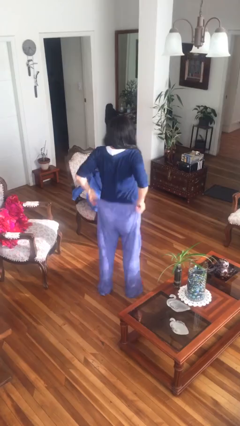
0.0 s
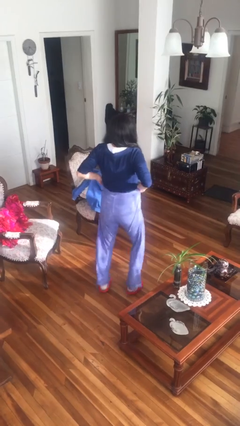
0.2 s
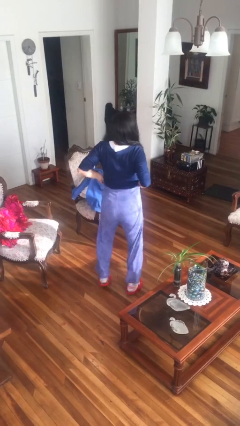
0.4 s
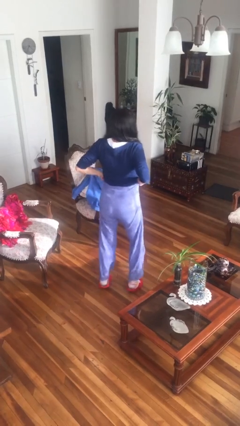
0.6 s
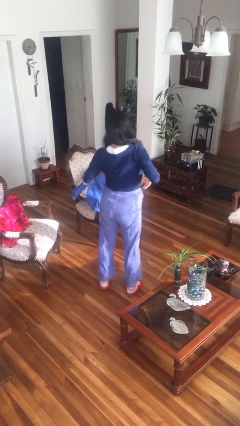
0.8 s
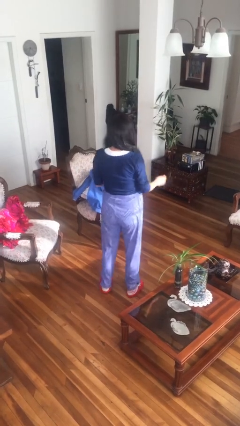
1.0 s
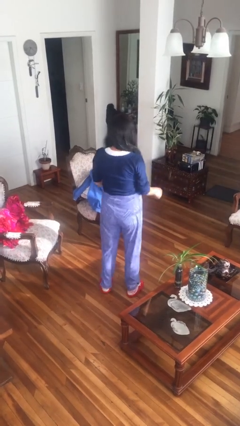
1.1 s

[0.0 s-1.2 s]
person hikes up pants

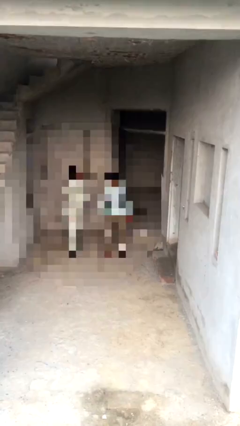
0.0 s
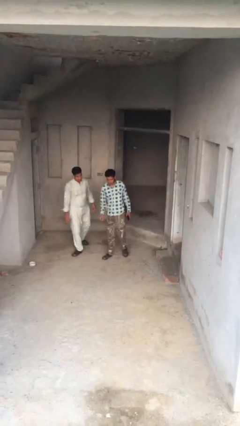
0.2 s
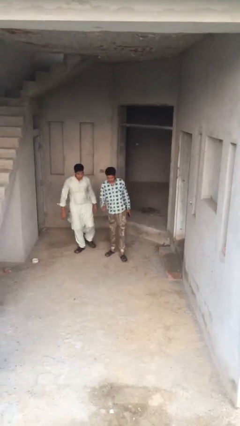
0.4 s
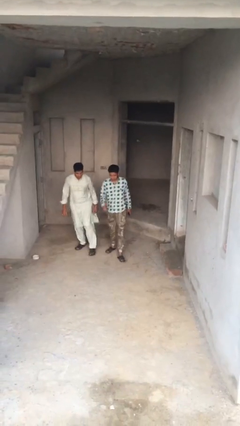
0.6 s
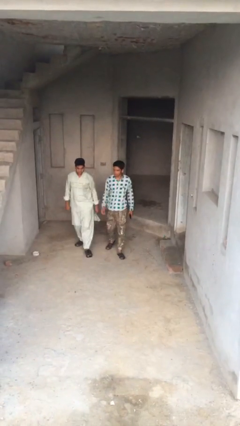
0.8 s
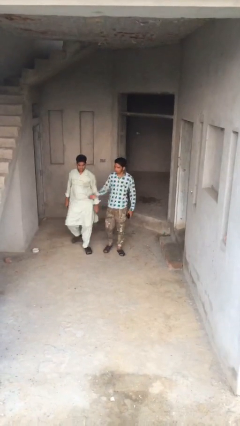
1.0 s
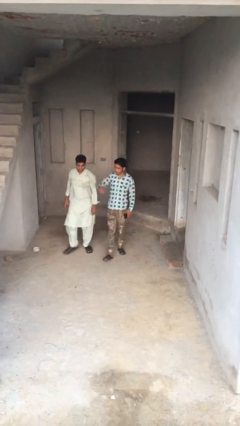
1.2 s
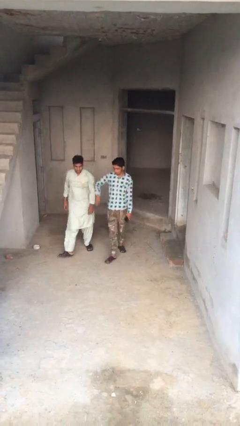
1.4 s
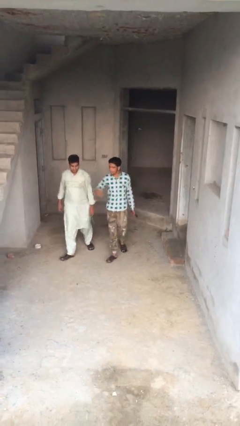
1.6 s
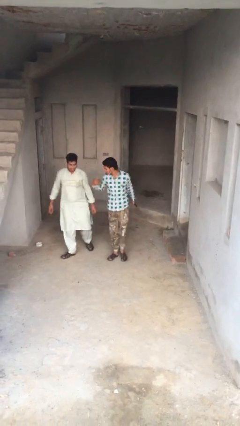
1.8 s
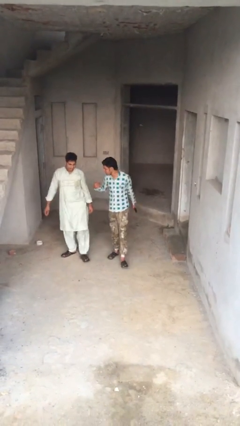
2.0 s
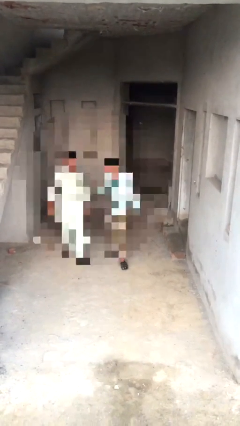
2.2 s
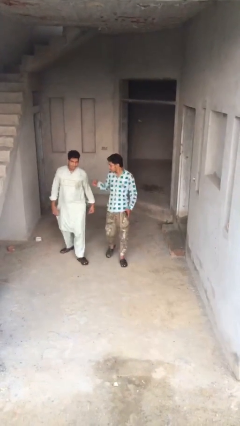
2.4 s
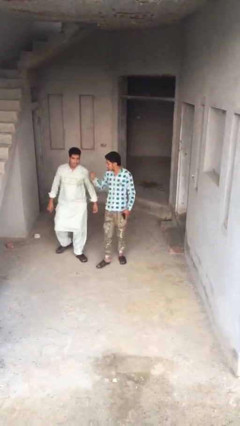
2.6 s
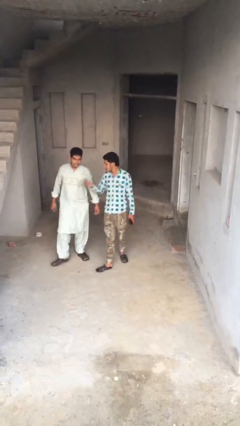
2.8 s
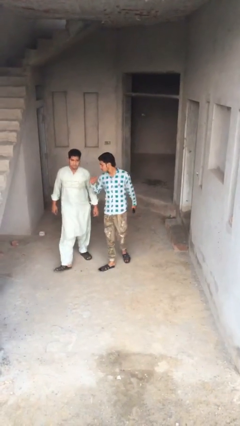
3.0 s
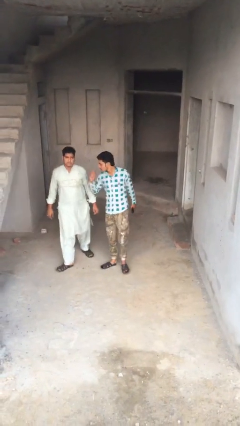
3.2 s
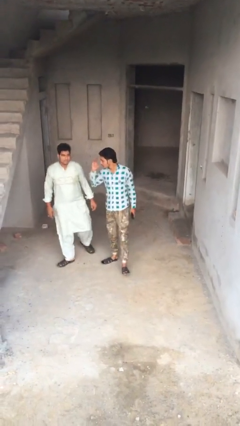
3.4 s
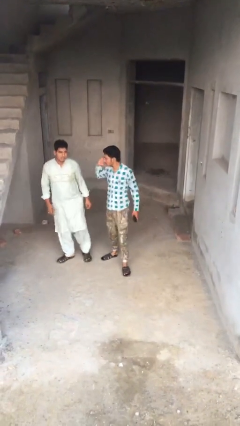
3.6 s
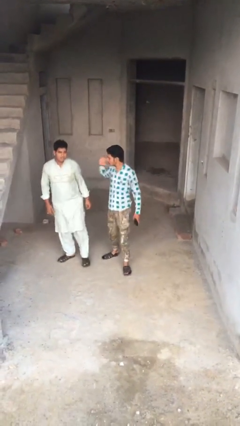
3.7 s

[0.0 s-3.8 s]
person talks to person

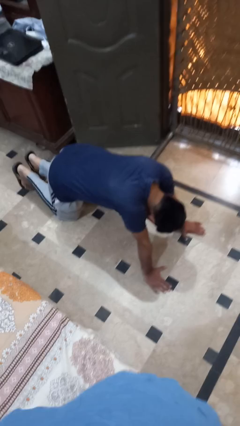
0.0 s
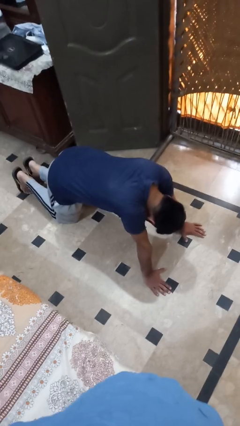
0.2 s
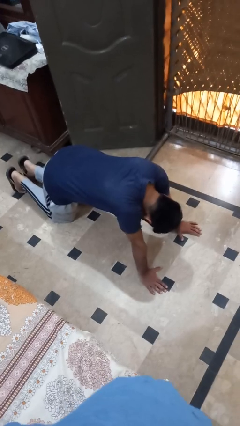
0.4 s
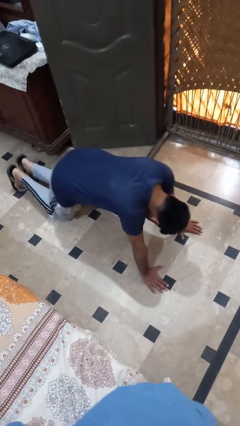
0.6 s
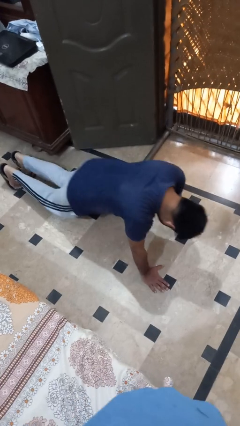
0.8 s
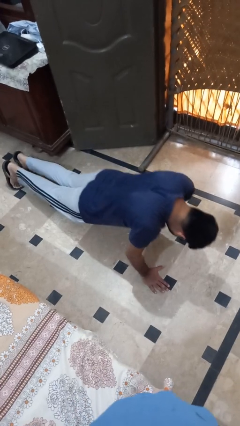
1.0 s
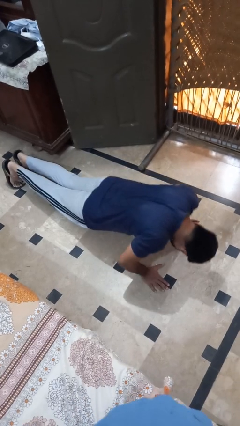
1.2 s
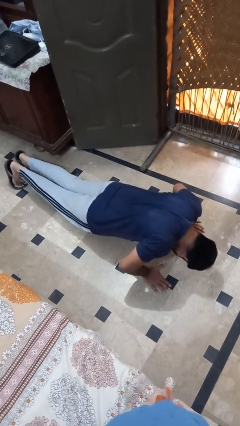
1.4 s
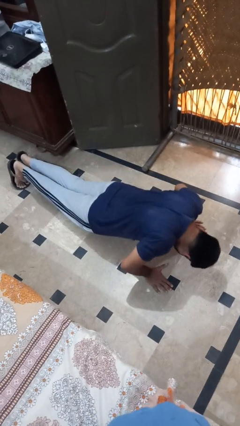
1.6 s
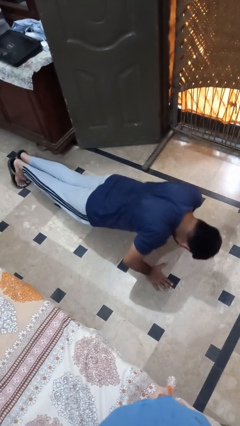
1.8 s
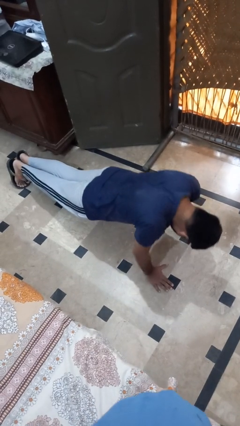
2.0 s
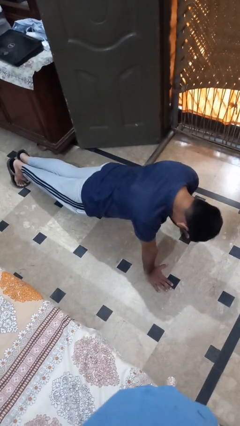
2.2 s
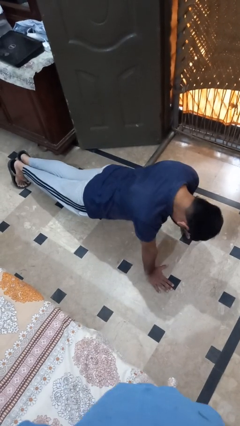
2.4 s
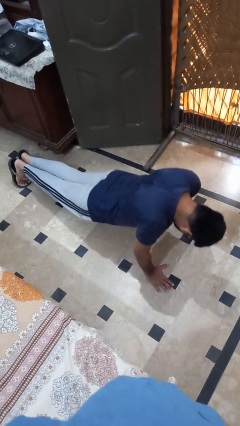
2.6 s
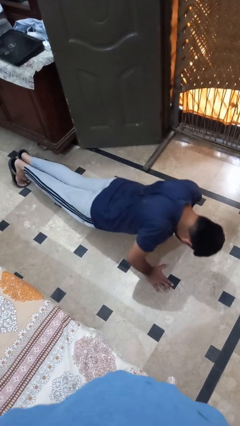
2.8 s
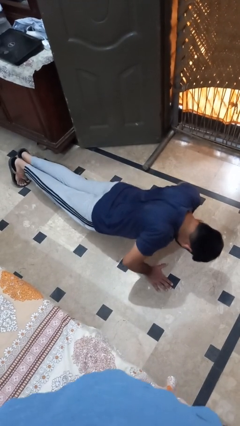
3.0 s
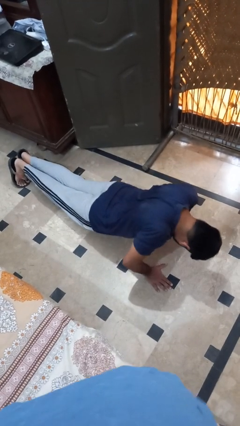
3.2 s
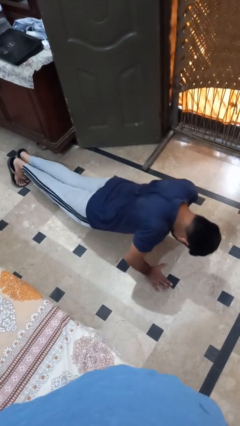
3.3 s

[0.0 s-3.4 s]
person exercises with pushup

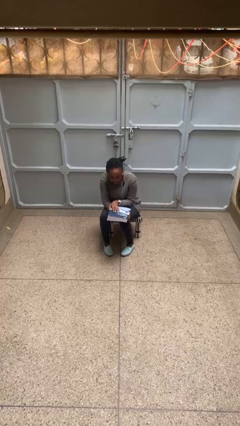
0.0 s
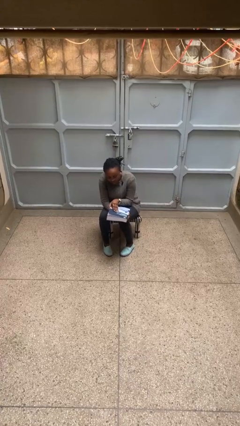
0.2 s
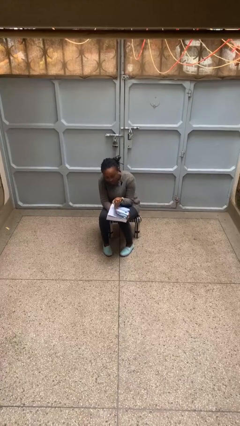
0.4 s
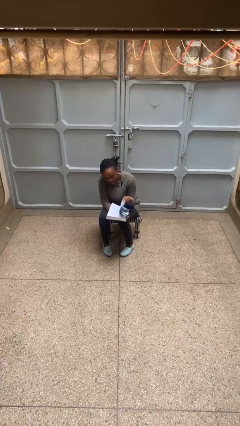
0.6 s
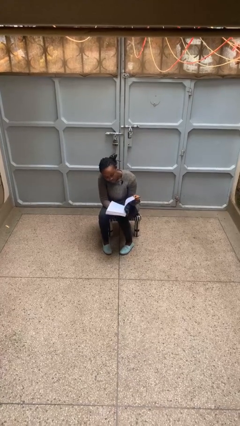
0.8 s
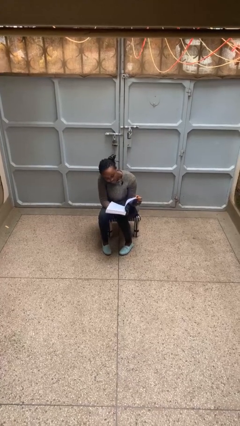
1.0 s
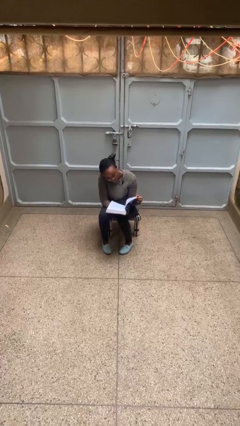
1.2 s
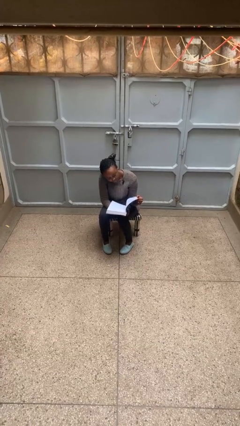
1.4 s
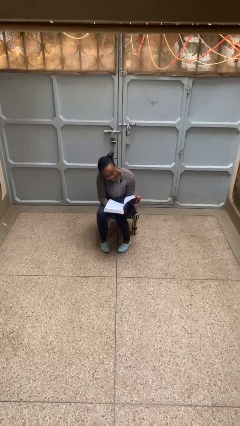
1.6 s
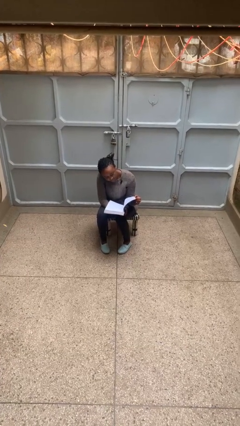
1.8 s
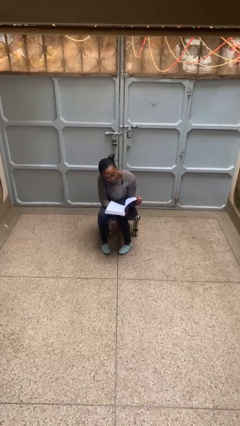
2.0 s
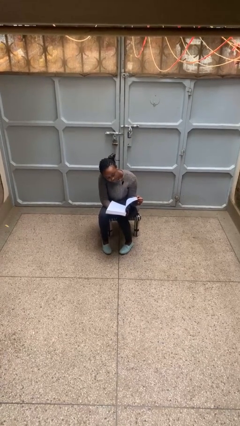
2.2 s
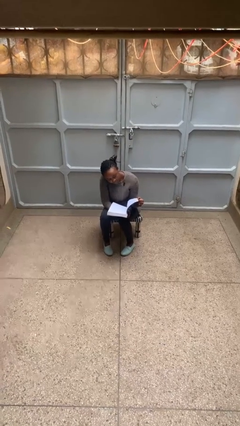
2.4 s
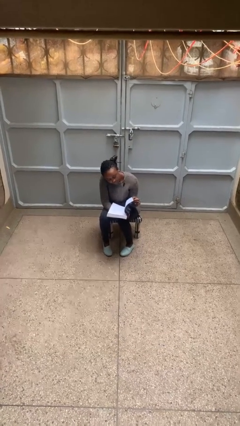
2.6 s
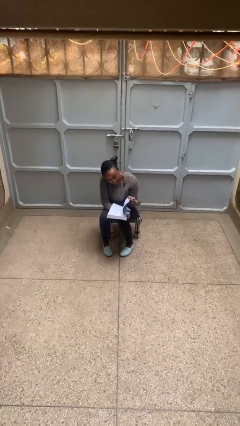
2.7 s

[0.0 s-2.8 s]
person reads book

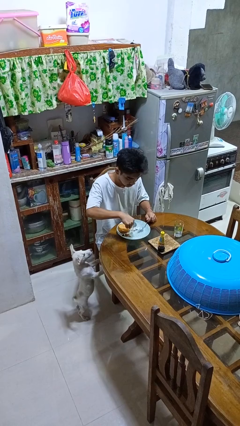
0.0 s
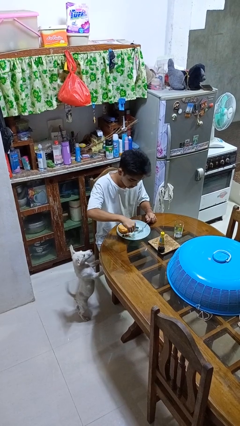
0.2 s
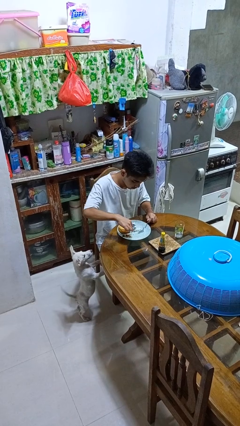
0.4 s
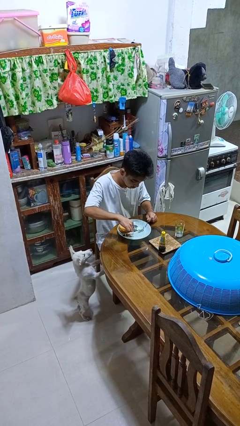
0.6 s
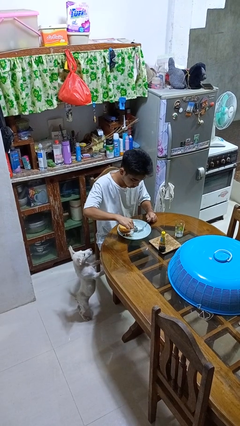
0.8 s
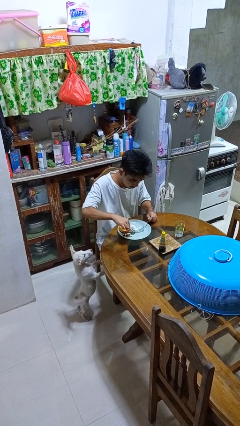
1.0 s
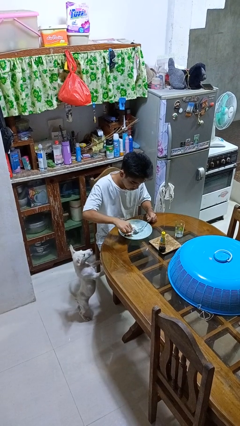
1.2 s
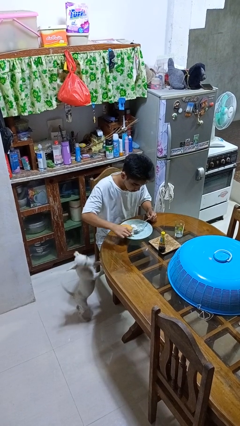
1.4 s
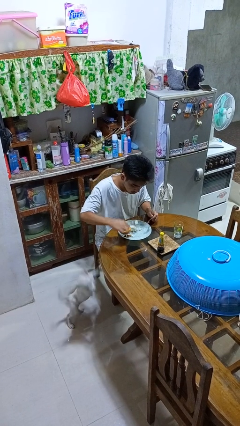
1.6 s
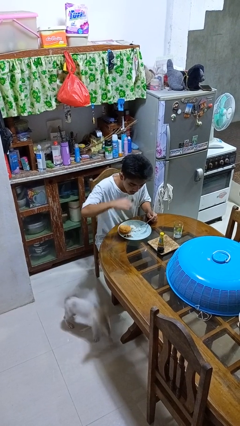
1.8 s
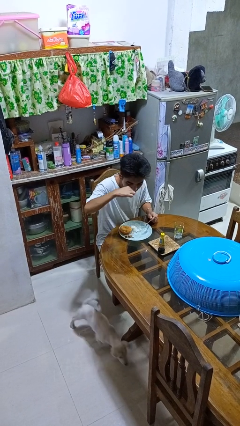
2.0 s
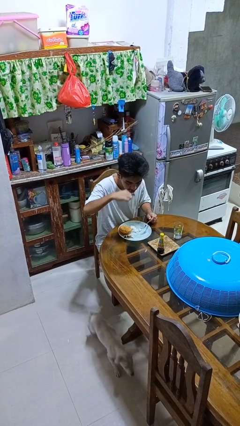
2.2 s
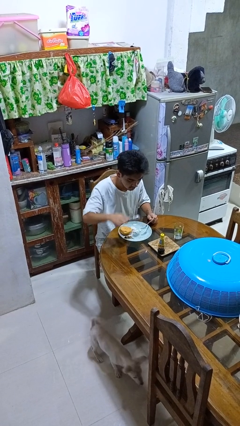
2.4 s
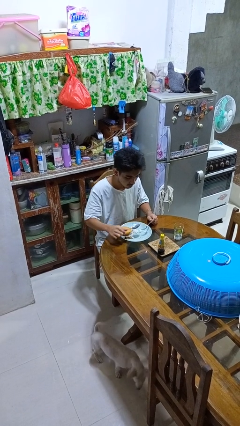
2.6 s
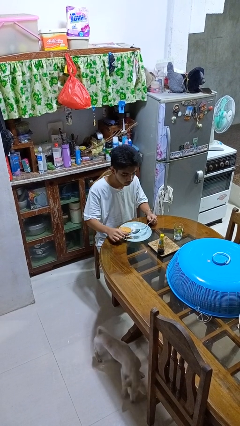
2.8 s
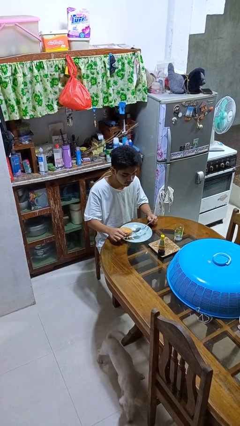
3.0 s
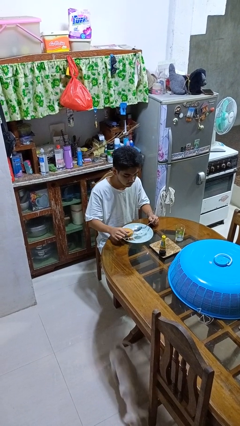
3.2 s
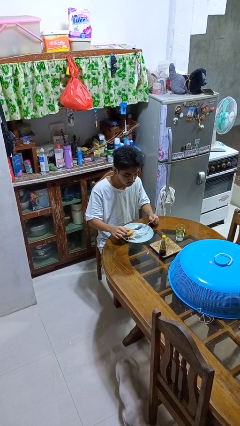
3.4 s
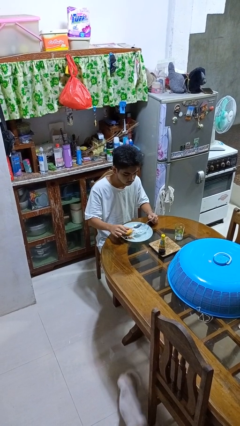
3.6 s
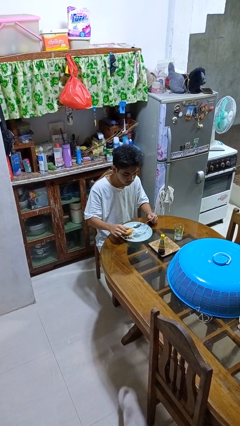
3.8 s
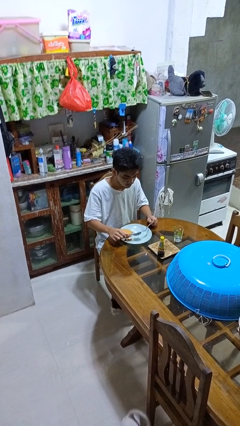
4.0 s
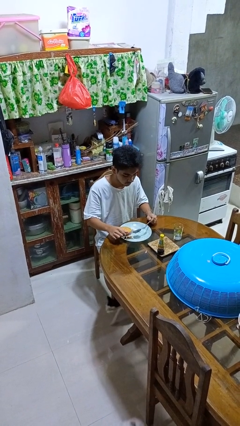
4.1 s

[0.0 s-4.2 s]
person eats with utensil

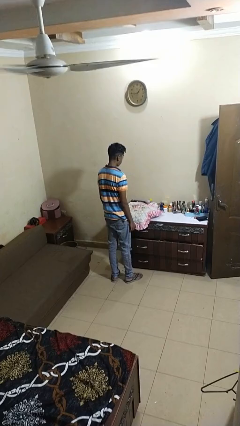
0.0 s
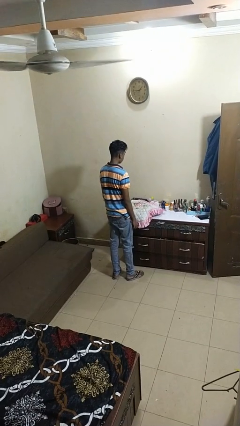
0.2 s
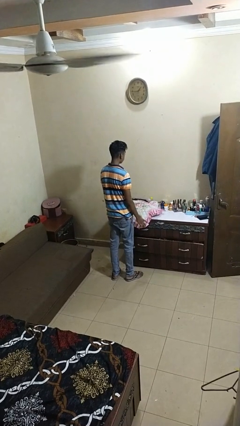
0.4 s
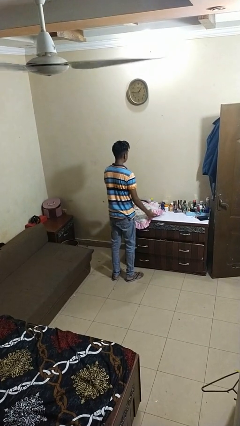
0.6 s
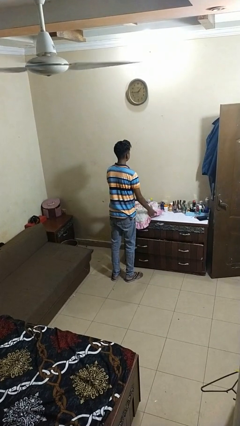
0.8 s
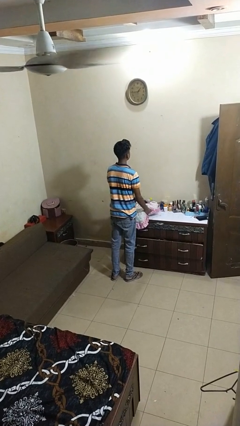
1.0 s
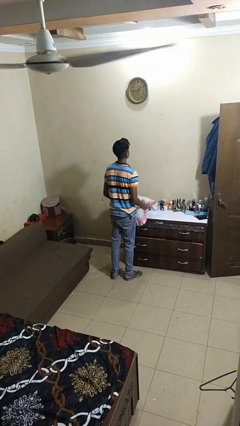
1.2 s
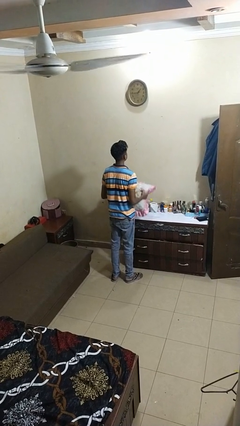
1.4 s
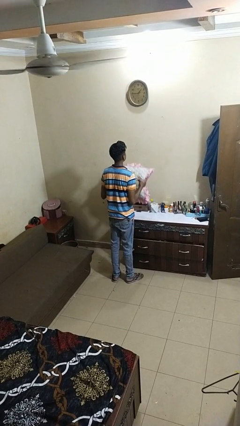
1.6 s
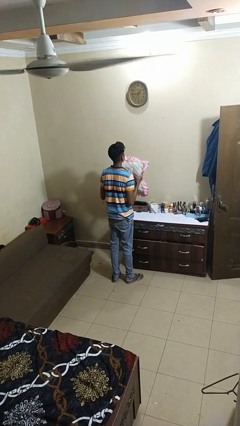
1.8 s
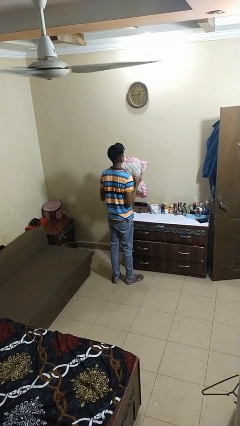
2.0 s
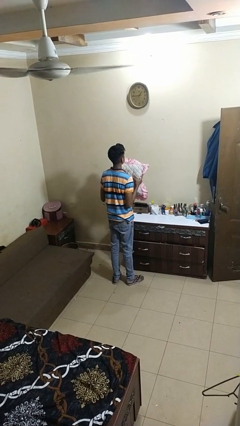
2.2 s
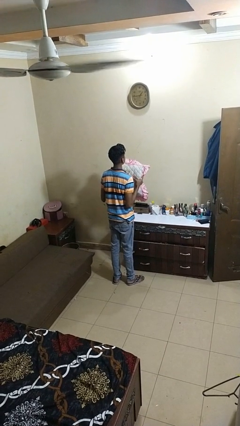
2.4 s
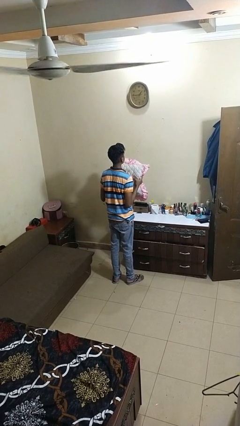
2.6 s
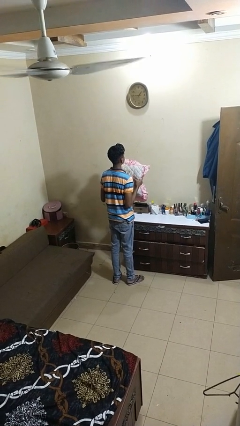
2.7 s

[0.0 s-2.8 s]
person picks up object from countertop
